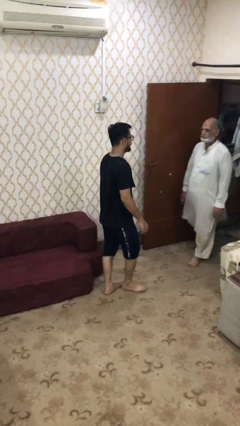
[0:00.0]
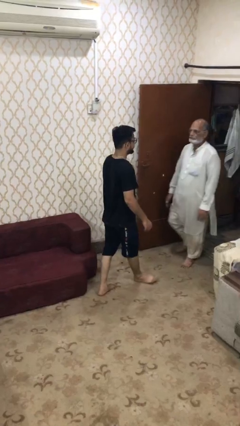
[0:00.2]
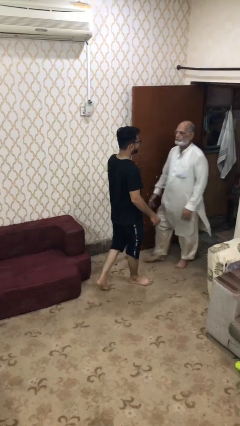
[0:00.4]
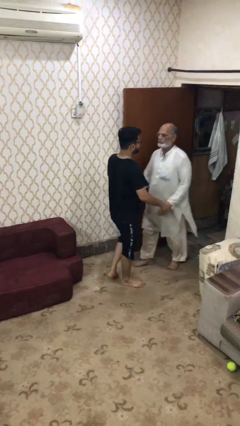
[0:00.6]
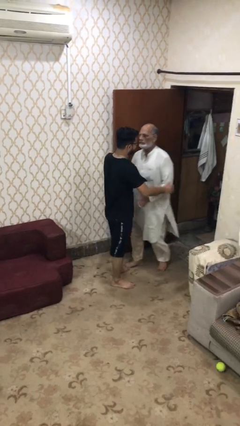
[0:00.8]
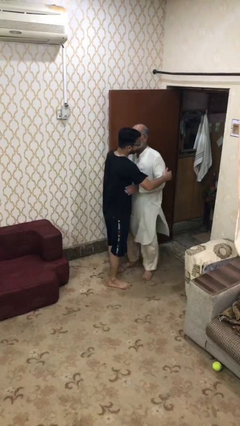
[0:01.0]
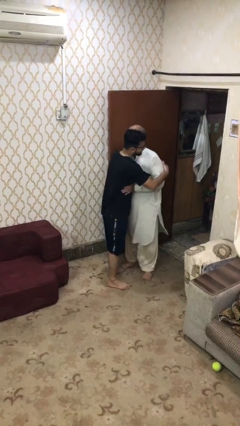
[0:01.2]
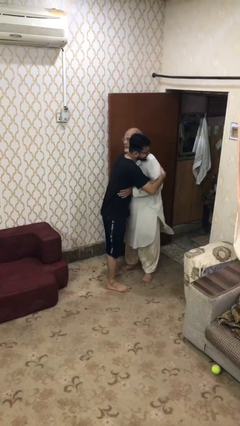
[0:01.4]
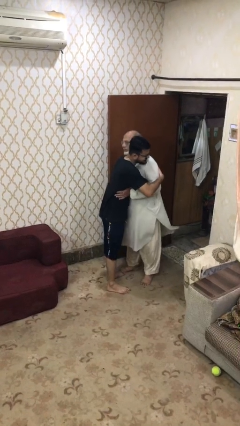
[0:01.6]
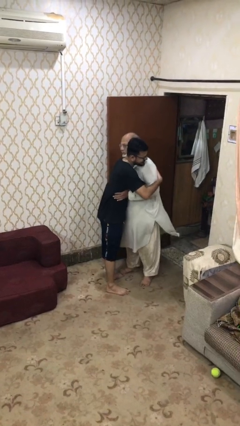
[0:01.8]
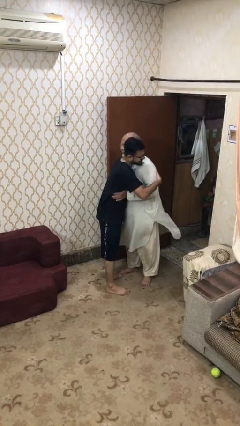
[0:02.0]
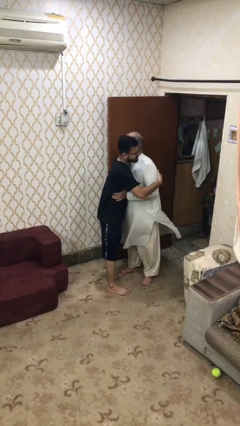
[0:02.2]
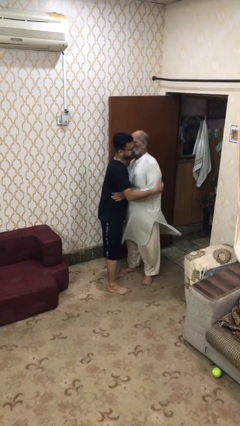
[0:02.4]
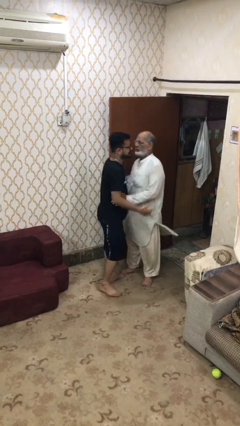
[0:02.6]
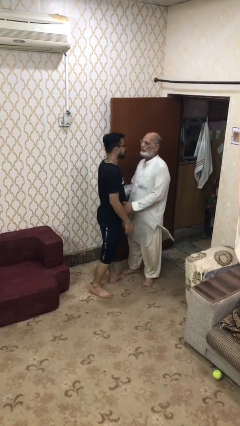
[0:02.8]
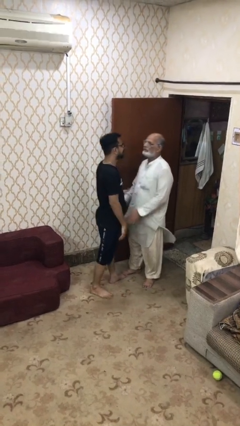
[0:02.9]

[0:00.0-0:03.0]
person embraces person

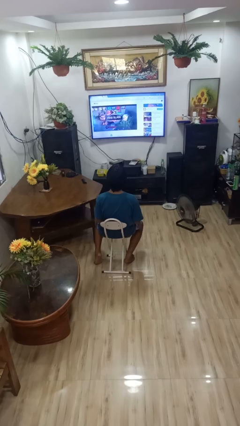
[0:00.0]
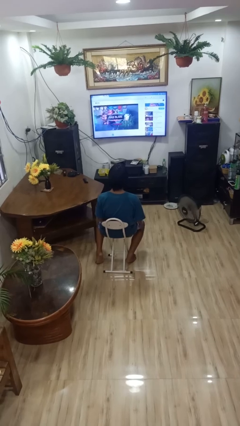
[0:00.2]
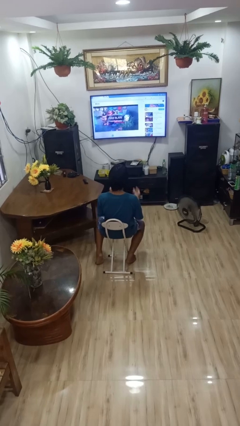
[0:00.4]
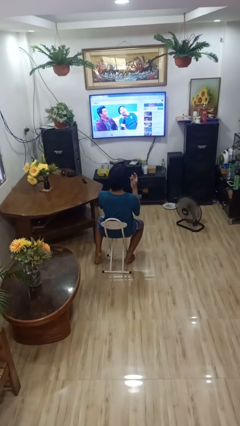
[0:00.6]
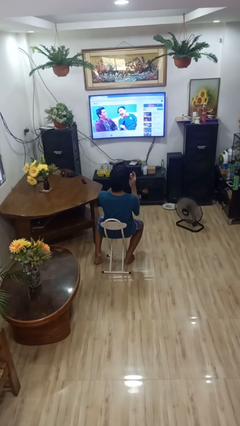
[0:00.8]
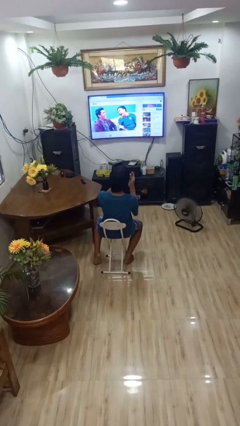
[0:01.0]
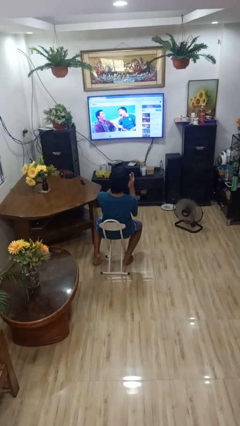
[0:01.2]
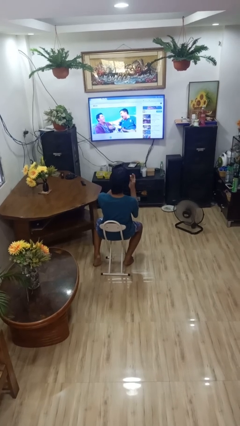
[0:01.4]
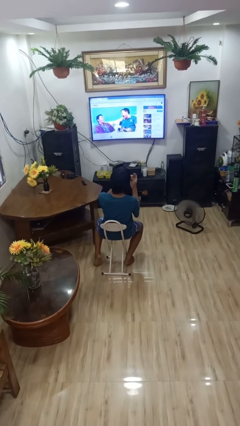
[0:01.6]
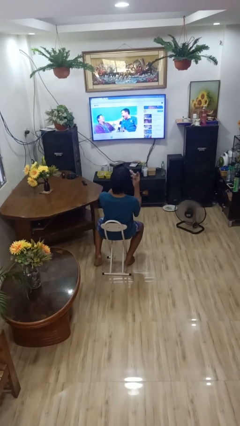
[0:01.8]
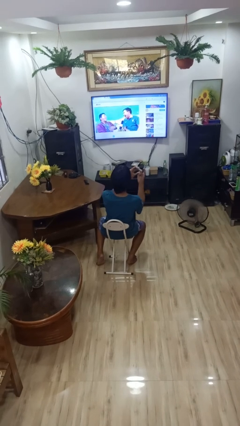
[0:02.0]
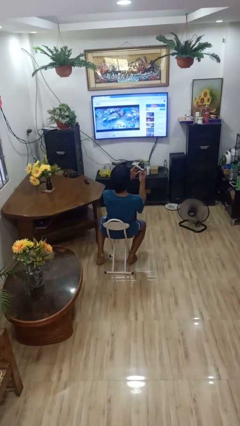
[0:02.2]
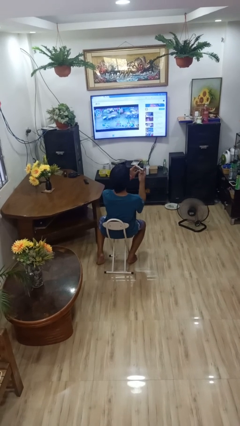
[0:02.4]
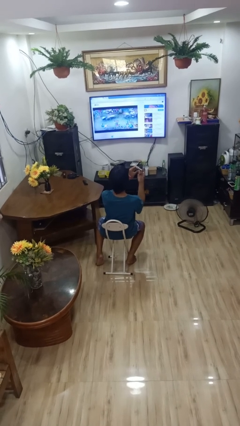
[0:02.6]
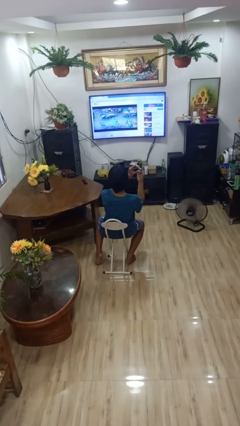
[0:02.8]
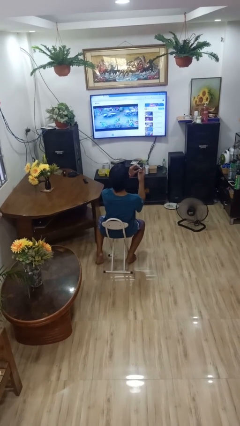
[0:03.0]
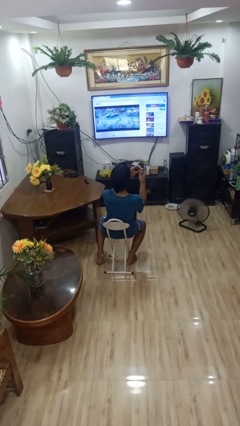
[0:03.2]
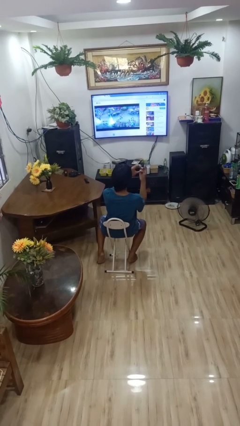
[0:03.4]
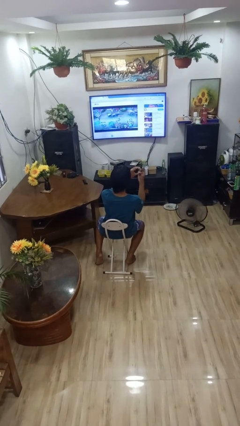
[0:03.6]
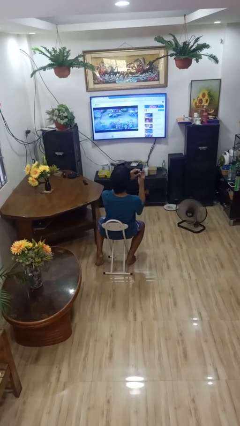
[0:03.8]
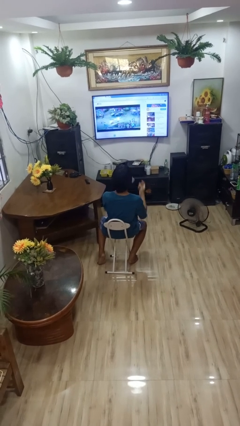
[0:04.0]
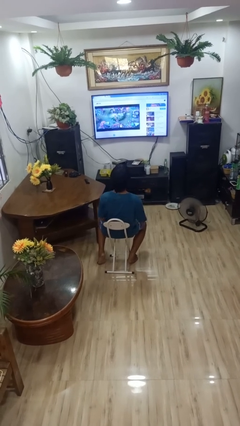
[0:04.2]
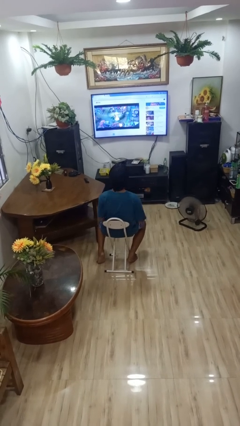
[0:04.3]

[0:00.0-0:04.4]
person clips fingernails

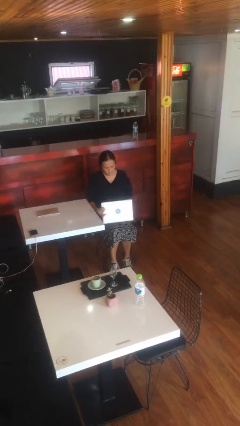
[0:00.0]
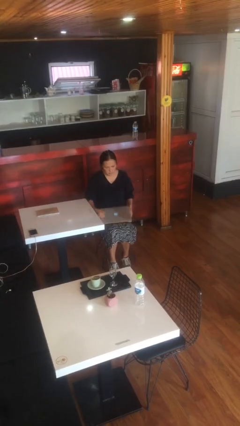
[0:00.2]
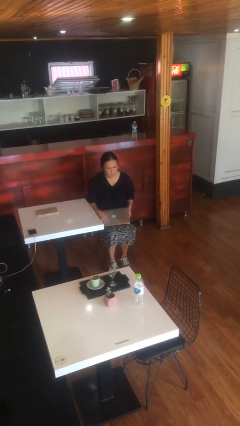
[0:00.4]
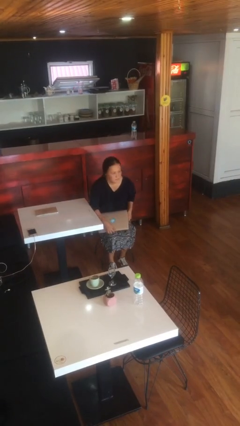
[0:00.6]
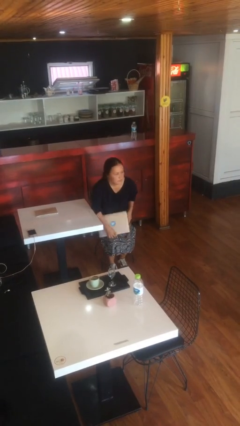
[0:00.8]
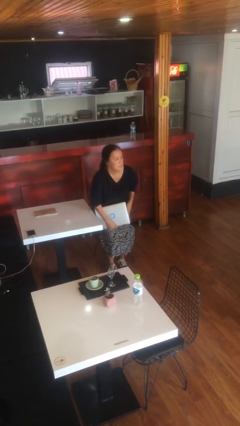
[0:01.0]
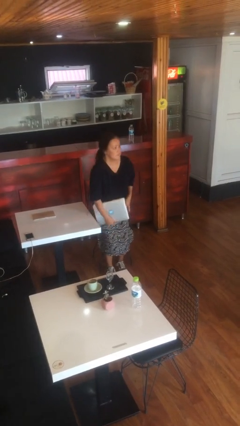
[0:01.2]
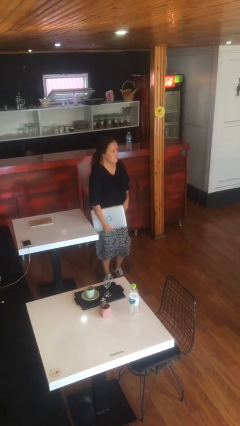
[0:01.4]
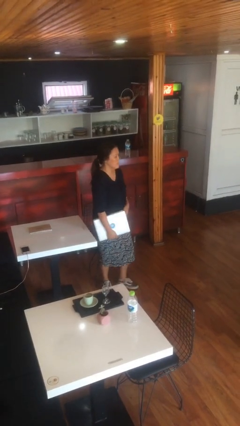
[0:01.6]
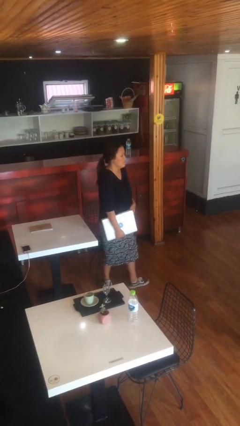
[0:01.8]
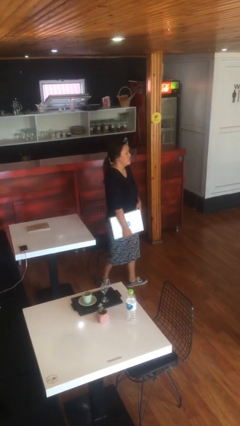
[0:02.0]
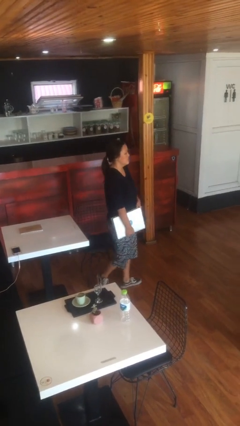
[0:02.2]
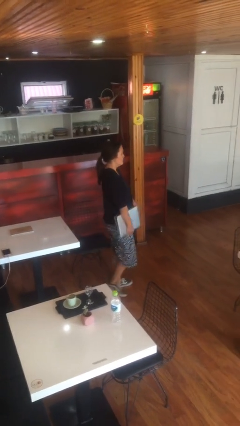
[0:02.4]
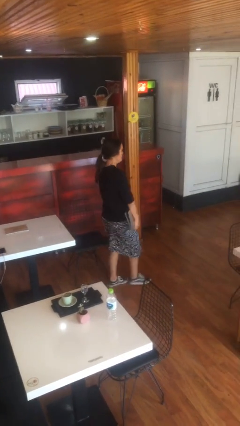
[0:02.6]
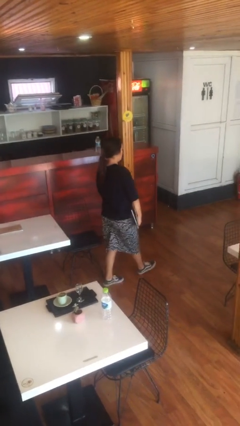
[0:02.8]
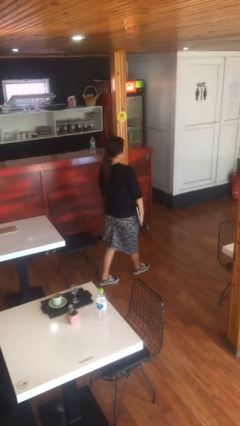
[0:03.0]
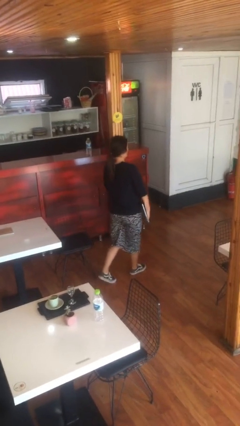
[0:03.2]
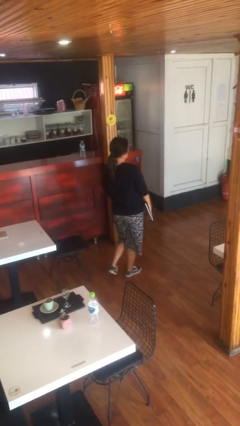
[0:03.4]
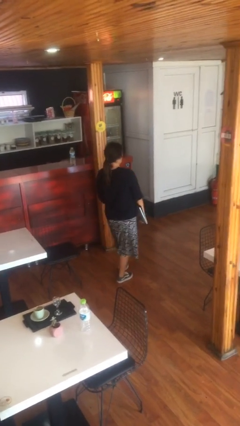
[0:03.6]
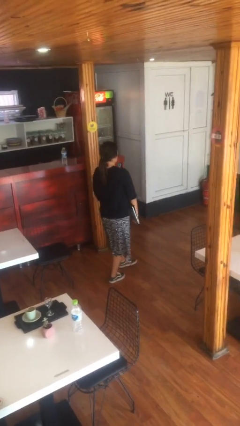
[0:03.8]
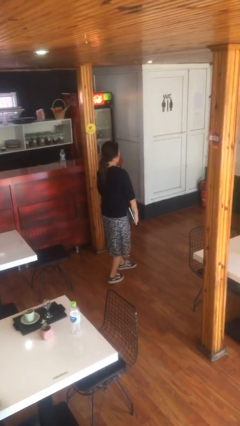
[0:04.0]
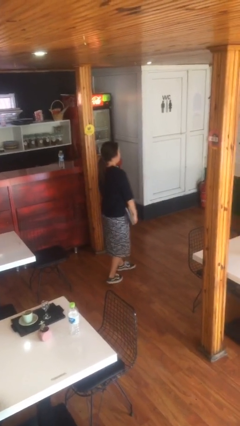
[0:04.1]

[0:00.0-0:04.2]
person stands up

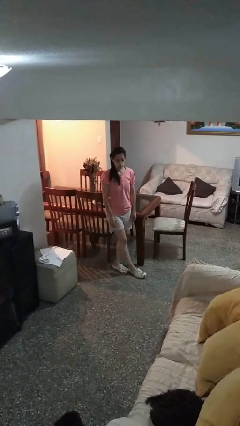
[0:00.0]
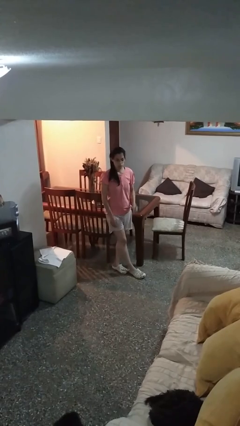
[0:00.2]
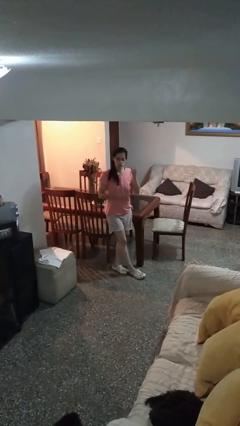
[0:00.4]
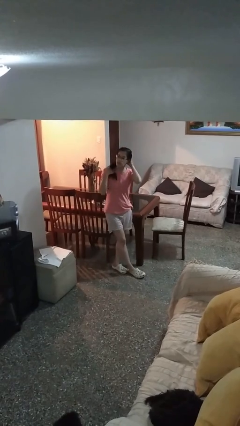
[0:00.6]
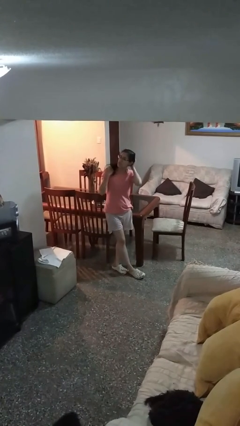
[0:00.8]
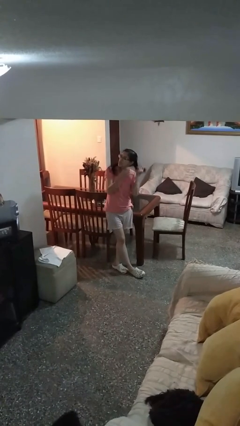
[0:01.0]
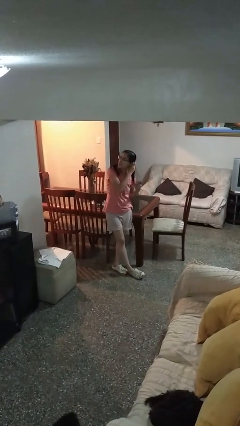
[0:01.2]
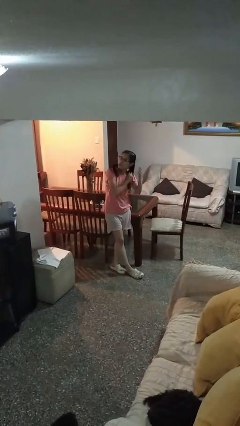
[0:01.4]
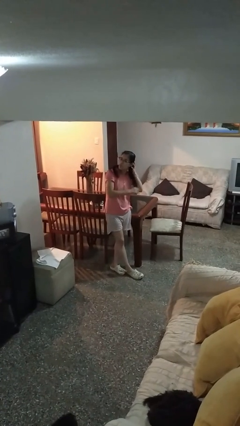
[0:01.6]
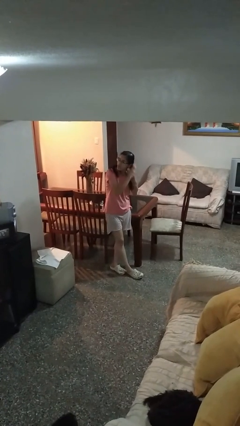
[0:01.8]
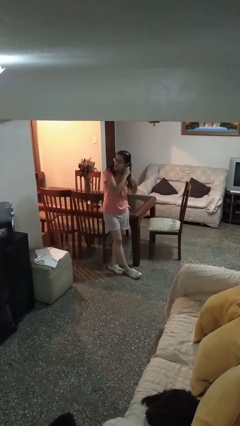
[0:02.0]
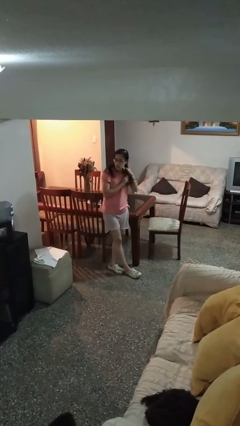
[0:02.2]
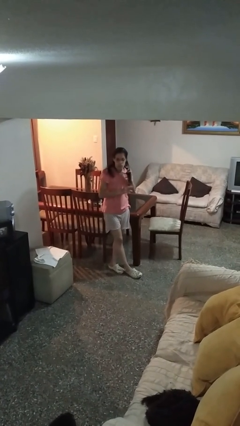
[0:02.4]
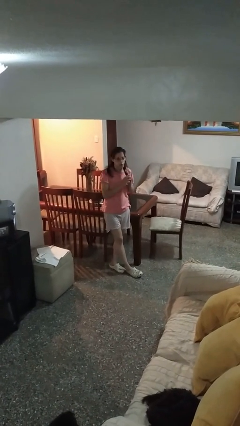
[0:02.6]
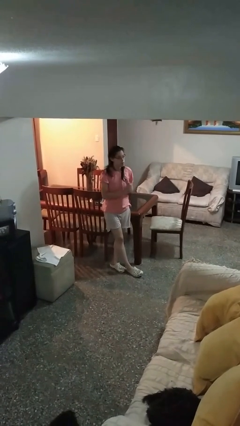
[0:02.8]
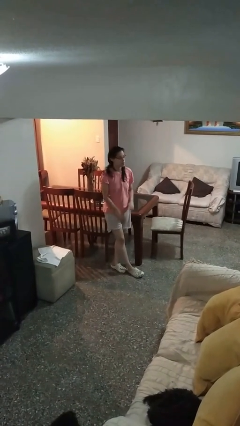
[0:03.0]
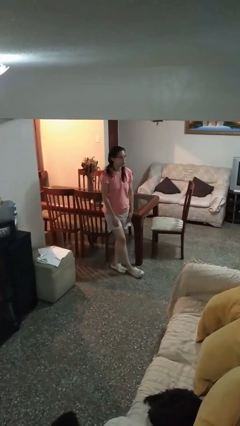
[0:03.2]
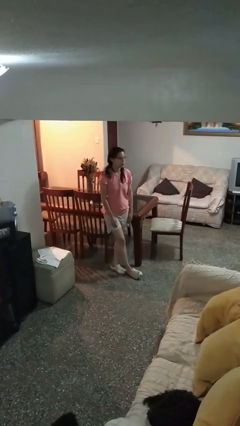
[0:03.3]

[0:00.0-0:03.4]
person strokes hair

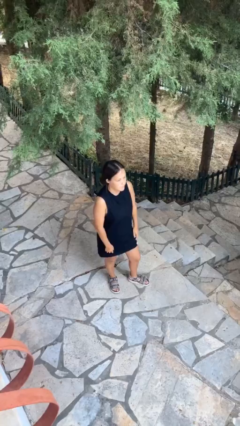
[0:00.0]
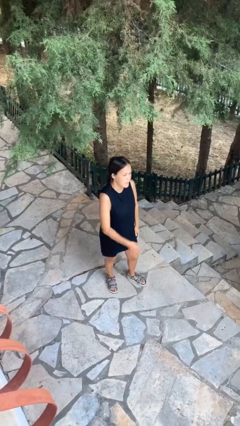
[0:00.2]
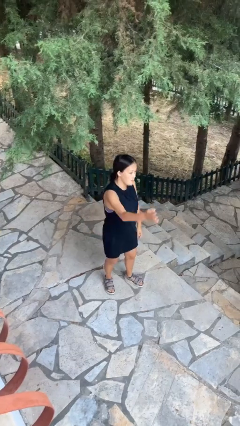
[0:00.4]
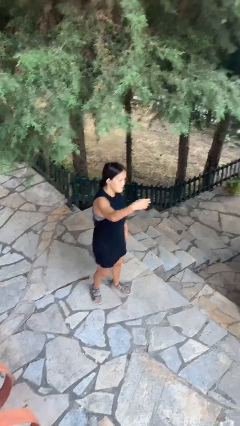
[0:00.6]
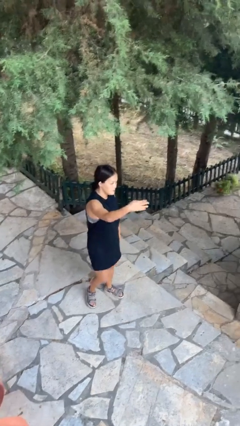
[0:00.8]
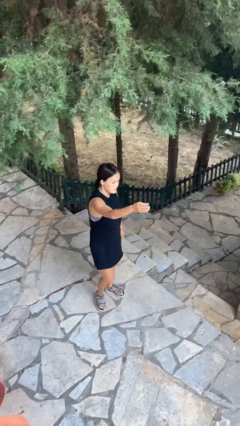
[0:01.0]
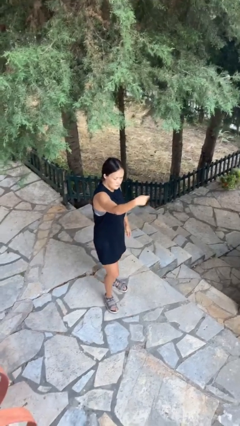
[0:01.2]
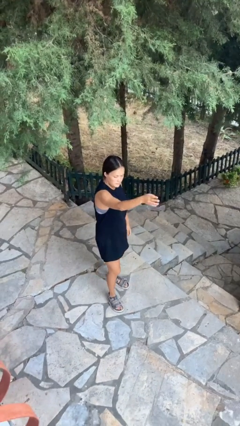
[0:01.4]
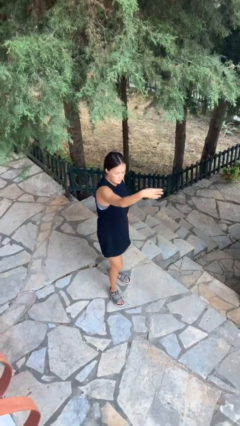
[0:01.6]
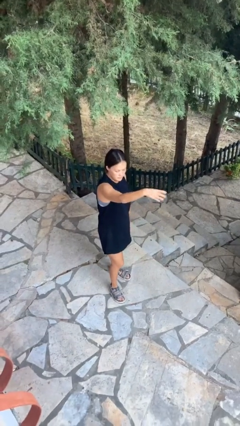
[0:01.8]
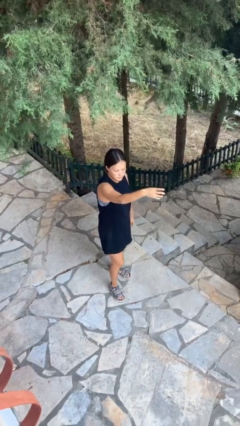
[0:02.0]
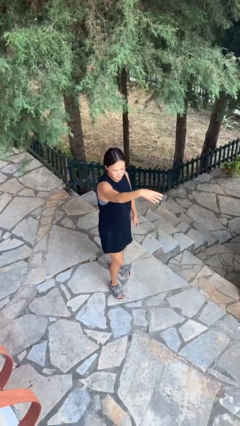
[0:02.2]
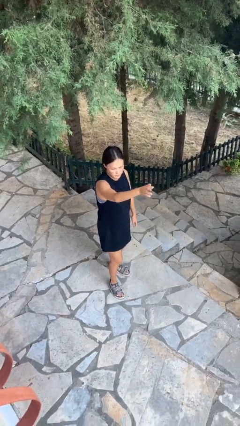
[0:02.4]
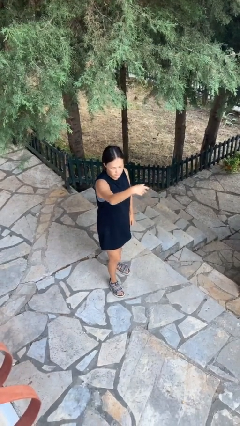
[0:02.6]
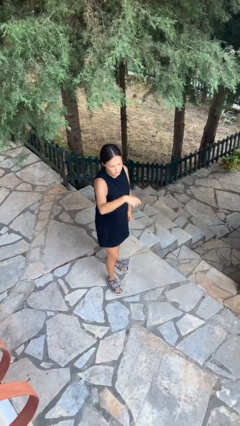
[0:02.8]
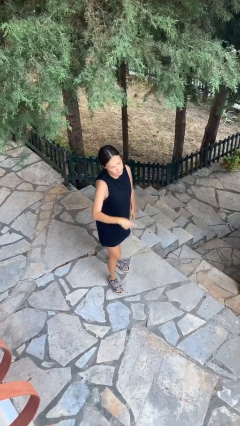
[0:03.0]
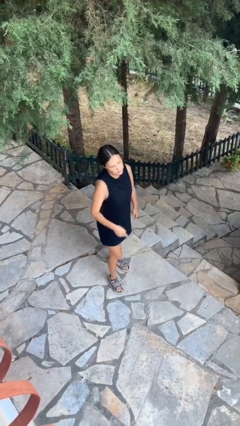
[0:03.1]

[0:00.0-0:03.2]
person gestures come here
